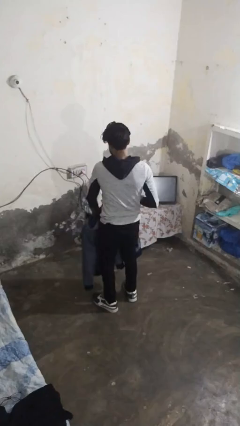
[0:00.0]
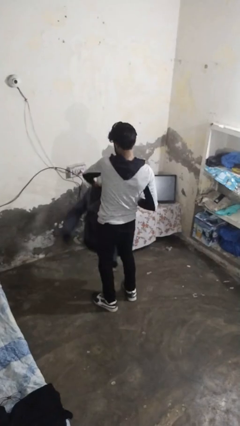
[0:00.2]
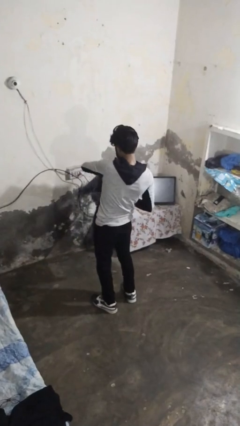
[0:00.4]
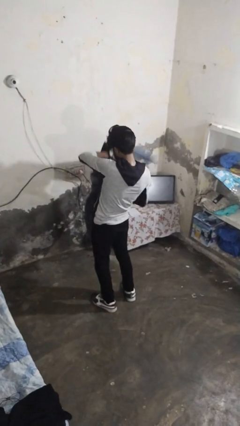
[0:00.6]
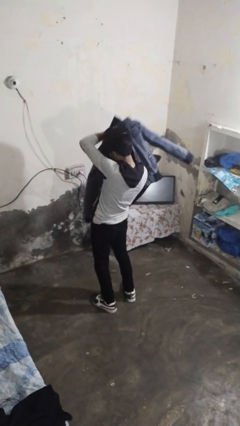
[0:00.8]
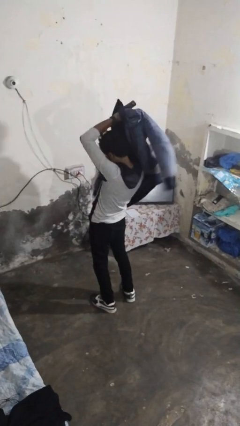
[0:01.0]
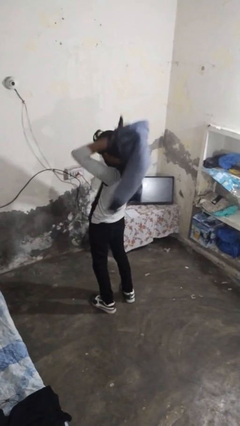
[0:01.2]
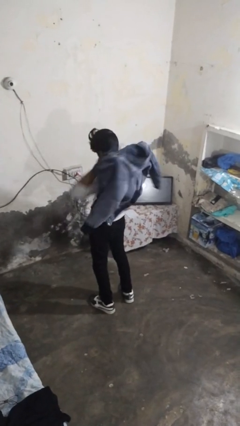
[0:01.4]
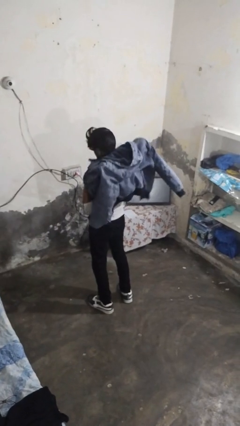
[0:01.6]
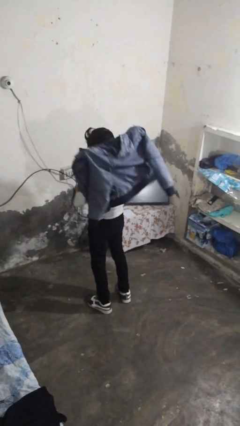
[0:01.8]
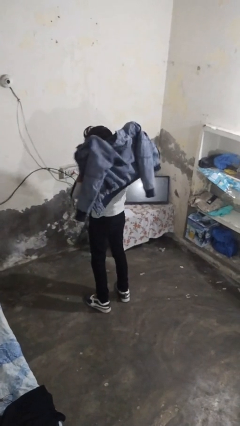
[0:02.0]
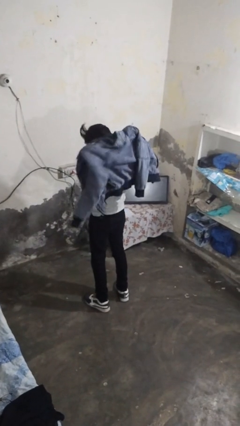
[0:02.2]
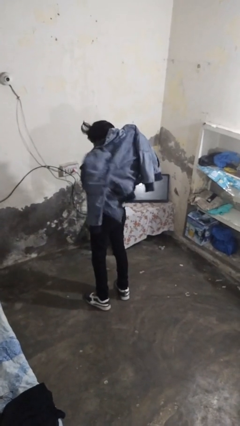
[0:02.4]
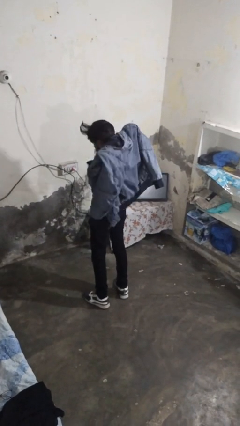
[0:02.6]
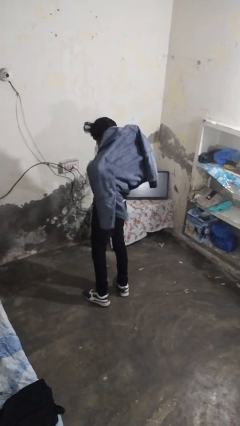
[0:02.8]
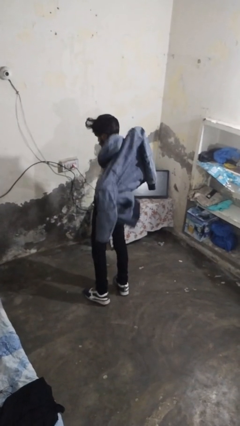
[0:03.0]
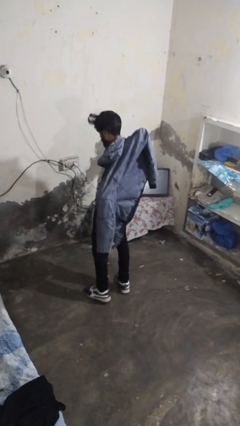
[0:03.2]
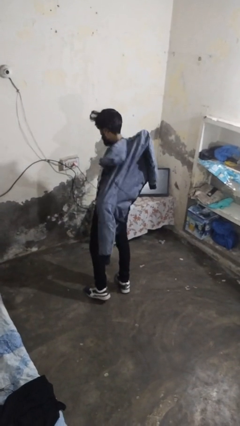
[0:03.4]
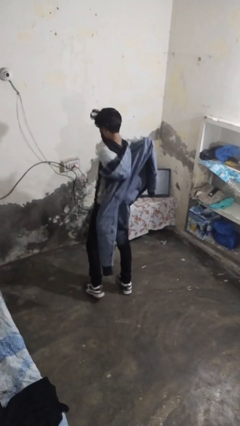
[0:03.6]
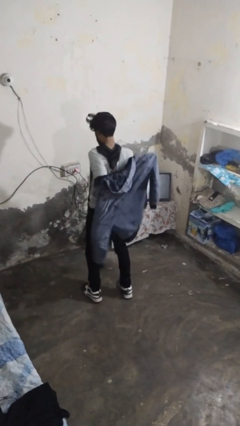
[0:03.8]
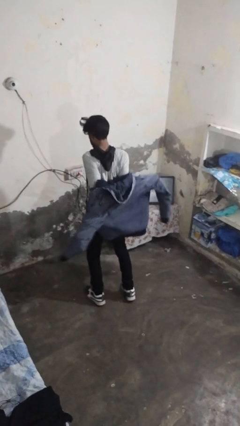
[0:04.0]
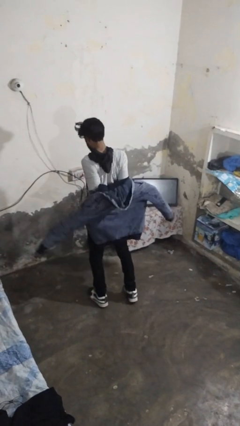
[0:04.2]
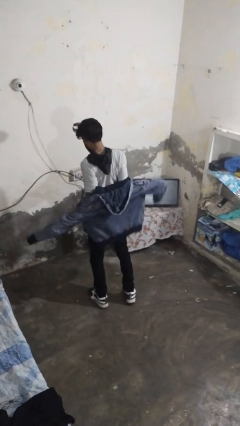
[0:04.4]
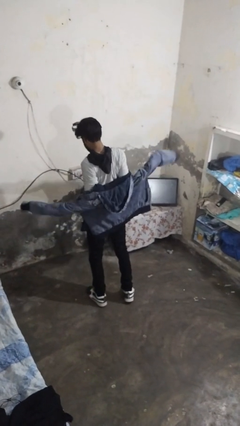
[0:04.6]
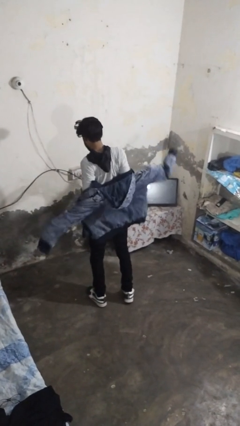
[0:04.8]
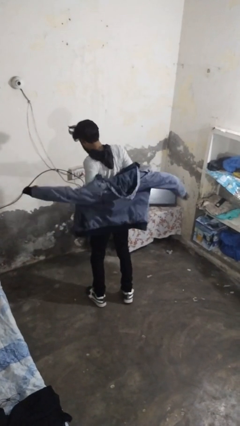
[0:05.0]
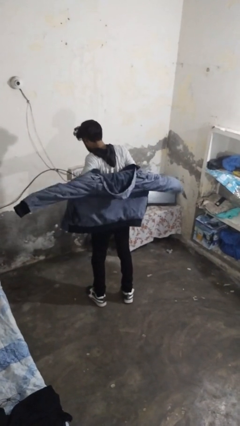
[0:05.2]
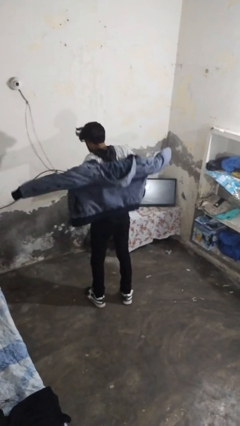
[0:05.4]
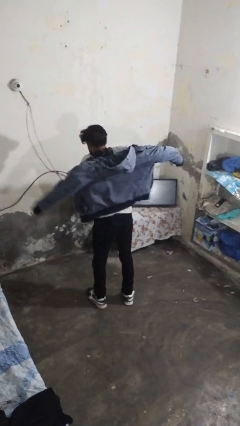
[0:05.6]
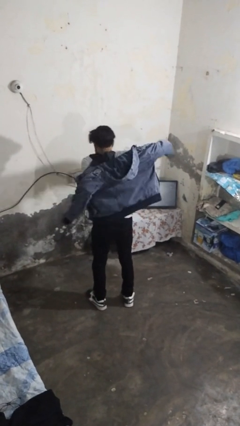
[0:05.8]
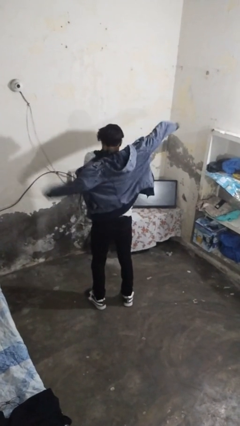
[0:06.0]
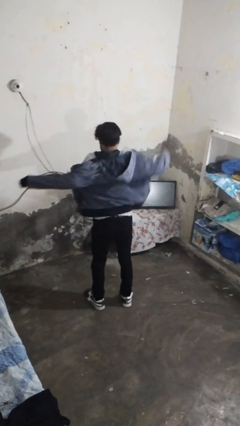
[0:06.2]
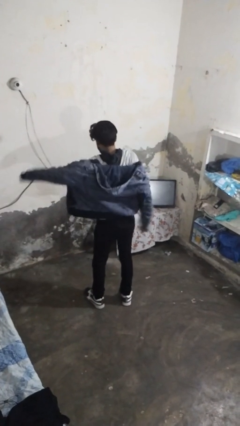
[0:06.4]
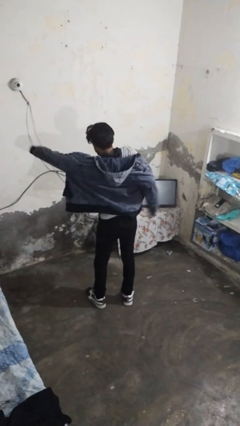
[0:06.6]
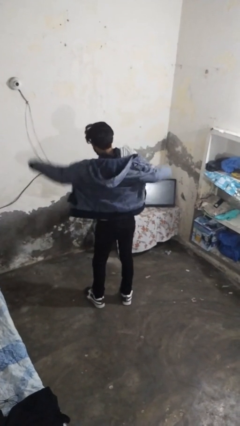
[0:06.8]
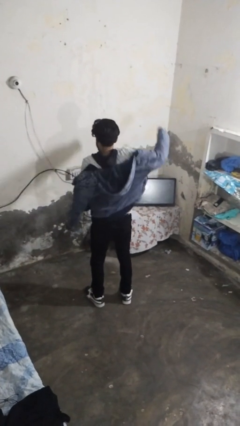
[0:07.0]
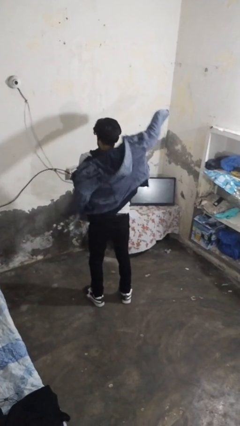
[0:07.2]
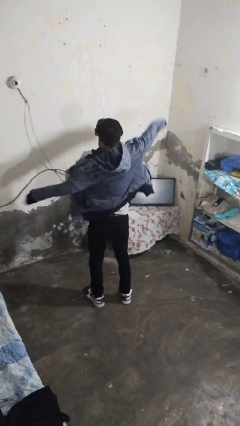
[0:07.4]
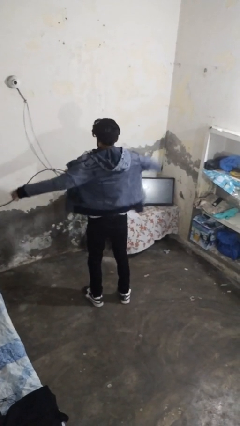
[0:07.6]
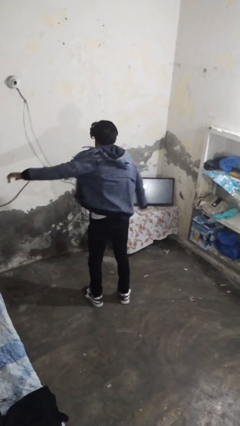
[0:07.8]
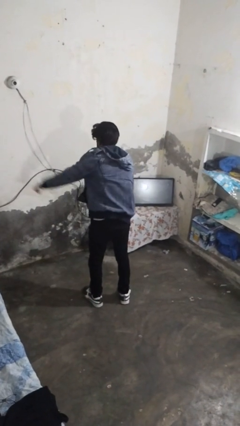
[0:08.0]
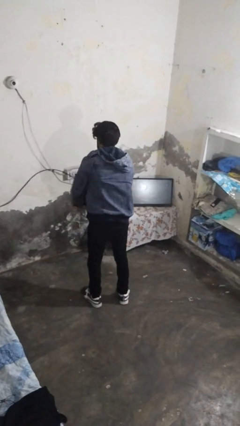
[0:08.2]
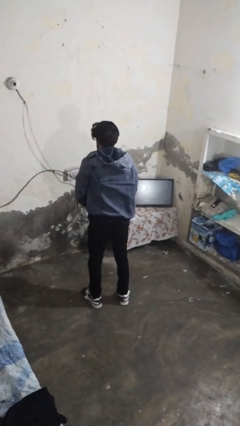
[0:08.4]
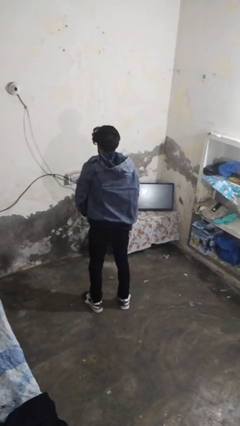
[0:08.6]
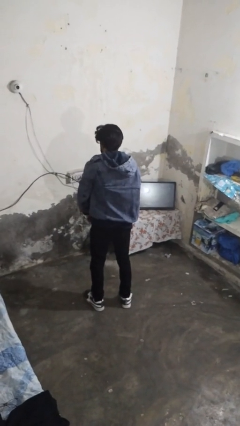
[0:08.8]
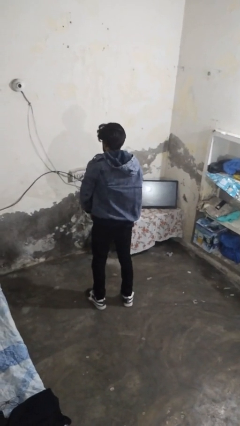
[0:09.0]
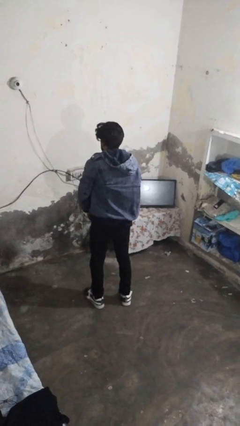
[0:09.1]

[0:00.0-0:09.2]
person puts on jacket

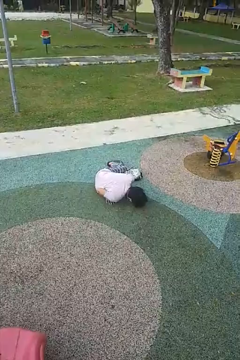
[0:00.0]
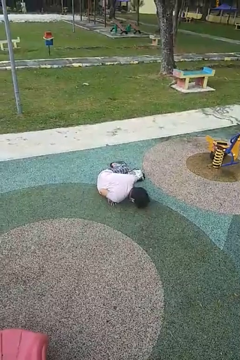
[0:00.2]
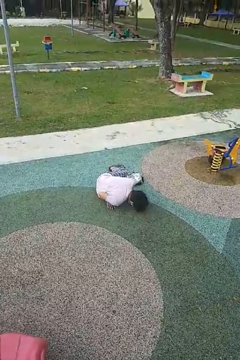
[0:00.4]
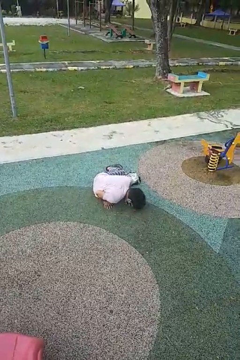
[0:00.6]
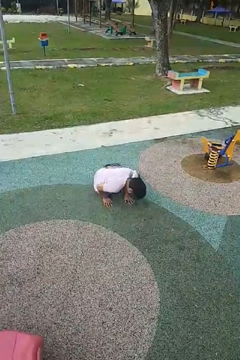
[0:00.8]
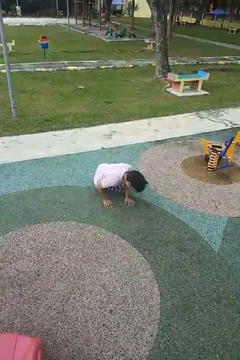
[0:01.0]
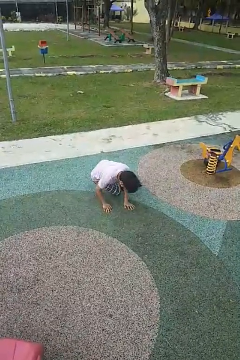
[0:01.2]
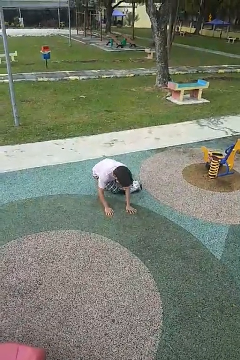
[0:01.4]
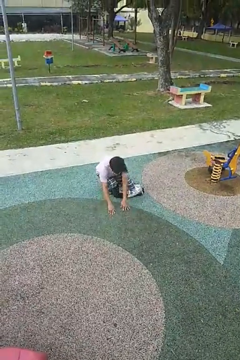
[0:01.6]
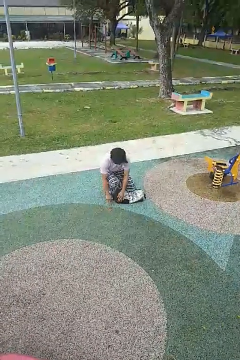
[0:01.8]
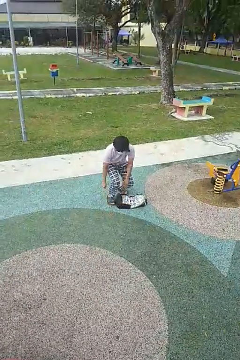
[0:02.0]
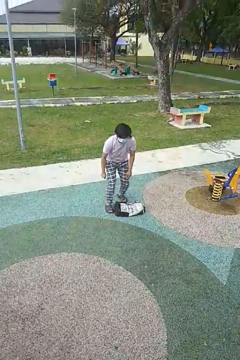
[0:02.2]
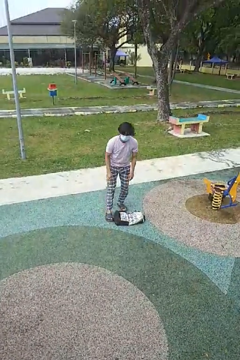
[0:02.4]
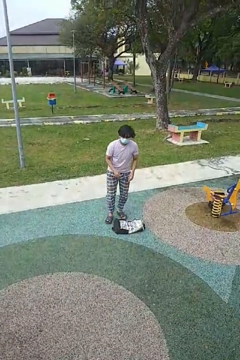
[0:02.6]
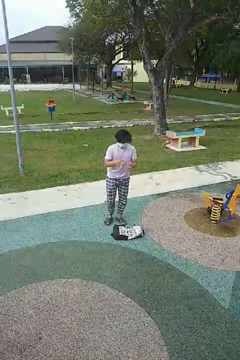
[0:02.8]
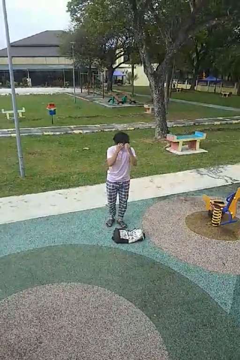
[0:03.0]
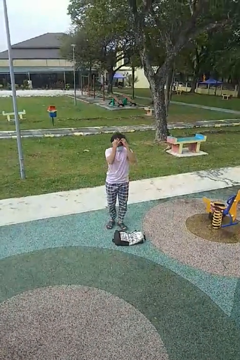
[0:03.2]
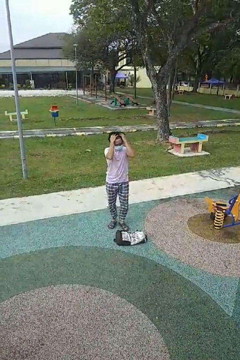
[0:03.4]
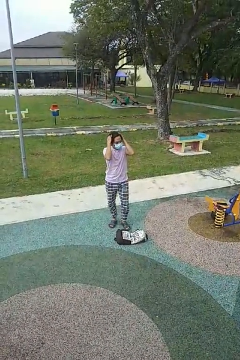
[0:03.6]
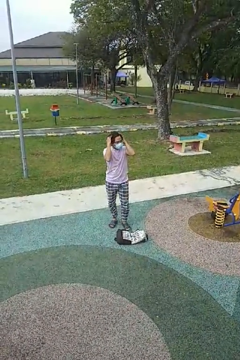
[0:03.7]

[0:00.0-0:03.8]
person stands up from floor

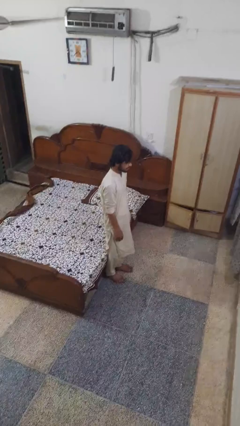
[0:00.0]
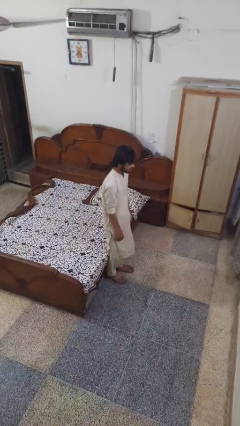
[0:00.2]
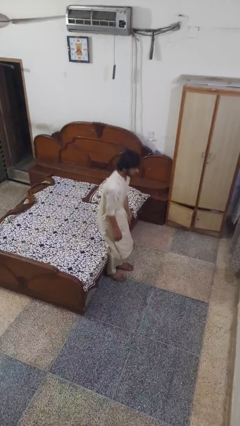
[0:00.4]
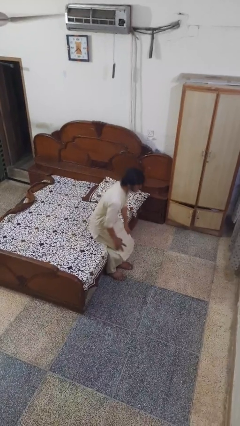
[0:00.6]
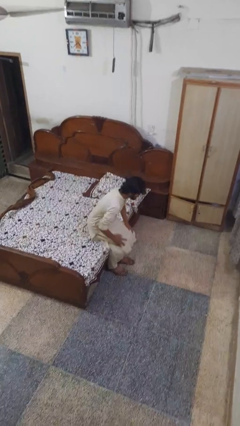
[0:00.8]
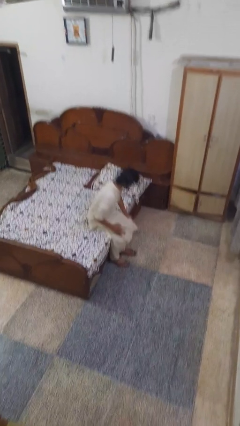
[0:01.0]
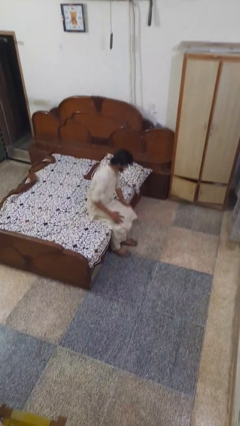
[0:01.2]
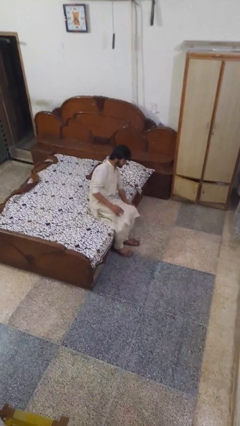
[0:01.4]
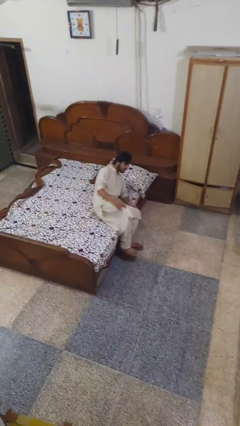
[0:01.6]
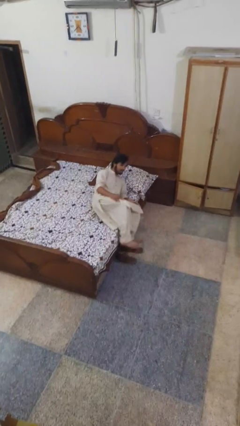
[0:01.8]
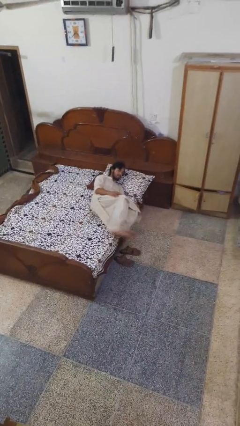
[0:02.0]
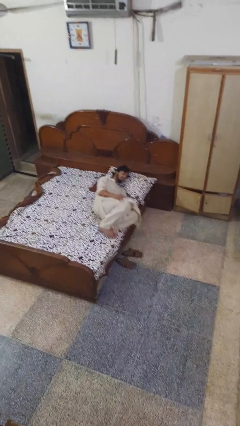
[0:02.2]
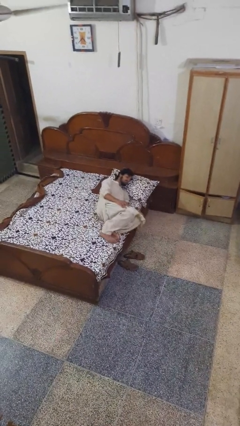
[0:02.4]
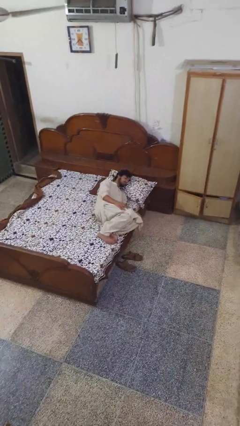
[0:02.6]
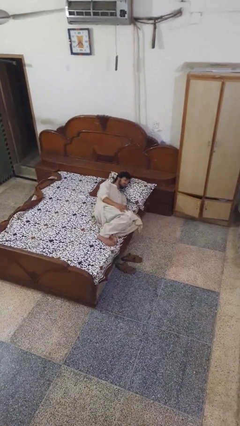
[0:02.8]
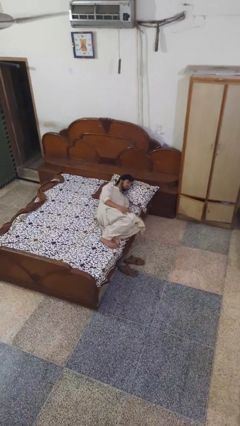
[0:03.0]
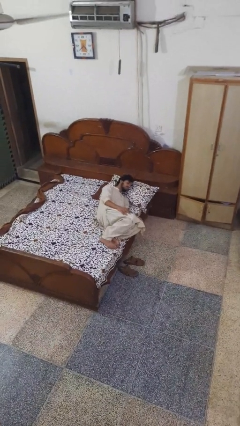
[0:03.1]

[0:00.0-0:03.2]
person lies down on bed

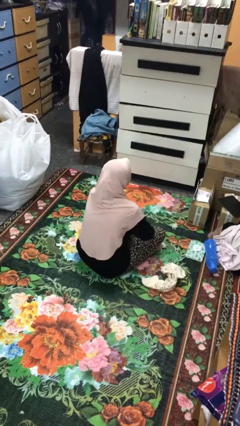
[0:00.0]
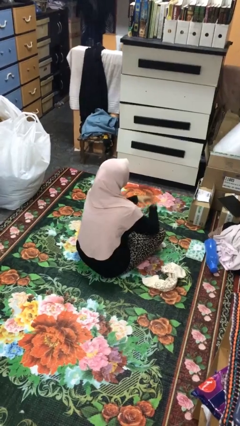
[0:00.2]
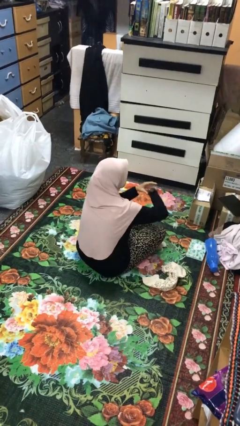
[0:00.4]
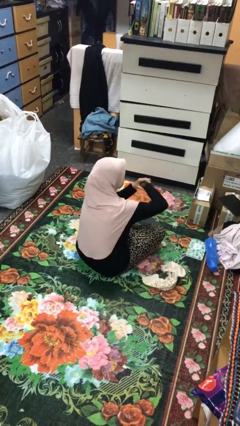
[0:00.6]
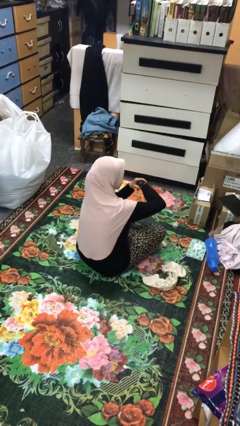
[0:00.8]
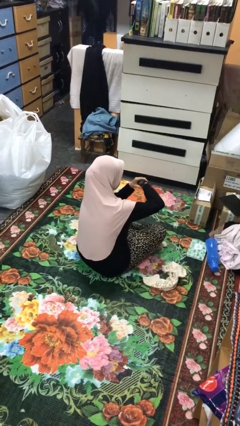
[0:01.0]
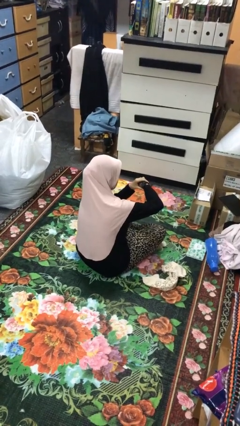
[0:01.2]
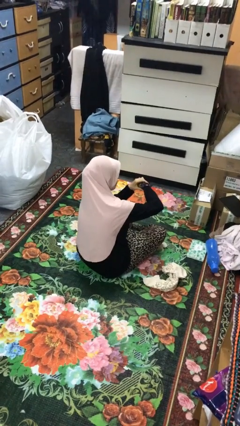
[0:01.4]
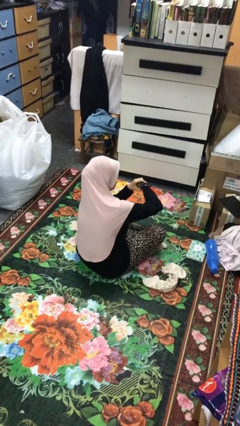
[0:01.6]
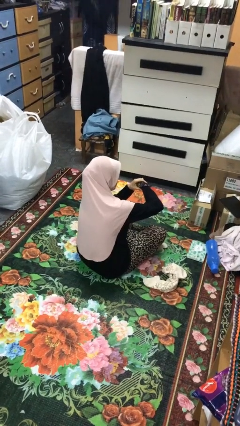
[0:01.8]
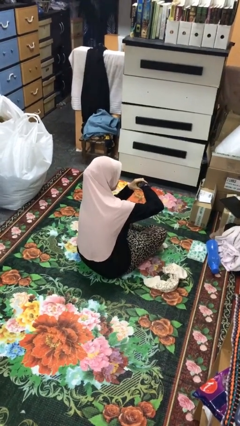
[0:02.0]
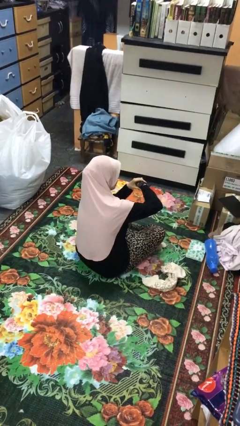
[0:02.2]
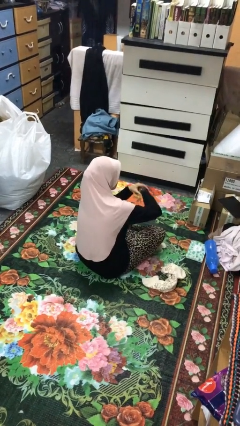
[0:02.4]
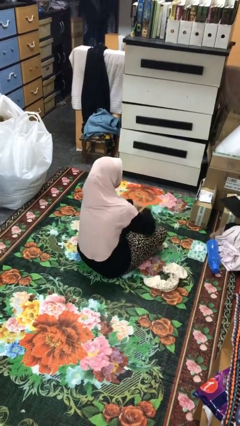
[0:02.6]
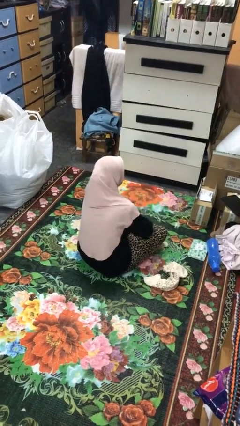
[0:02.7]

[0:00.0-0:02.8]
person looks at wristwatch
